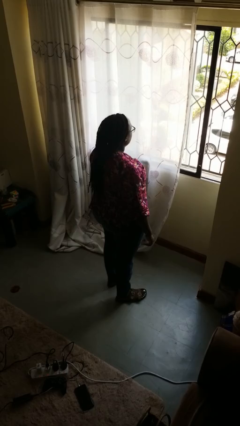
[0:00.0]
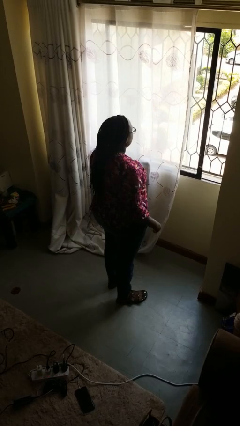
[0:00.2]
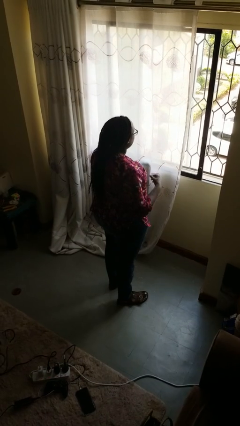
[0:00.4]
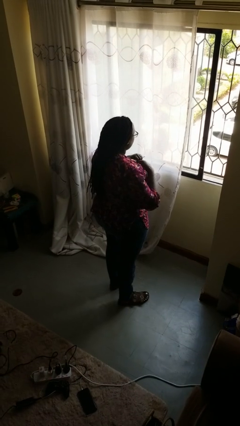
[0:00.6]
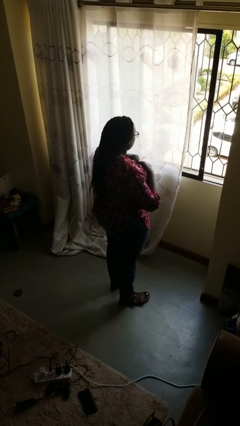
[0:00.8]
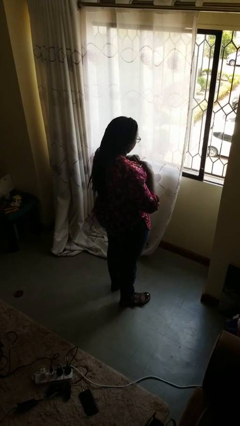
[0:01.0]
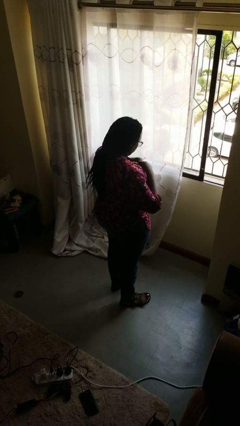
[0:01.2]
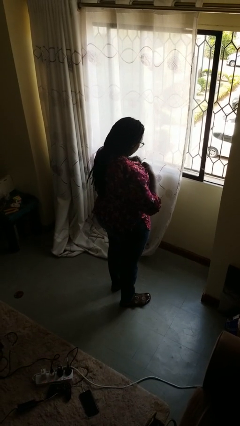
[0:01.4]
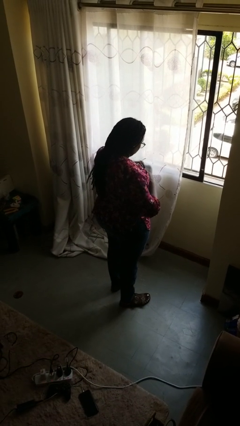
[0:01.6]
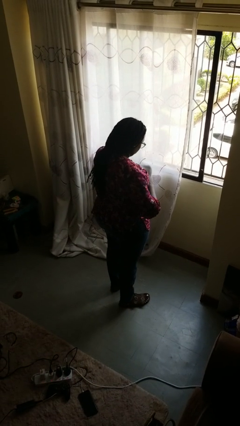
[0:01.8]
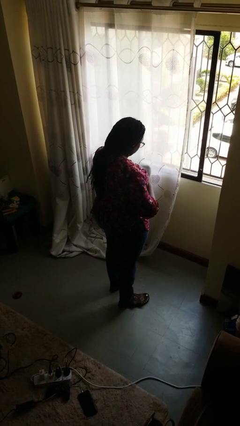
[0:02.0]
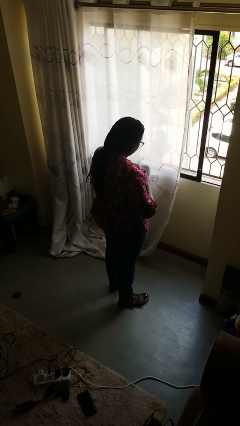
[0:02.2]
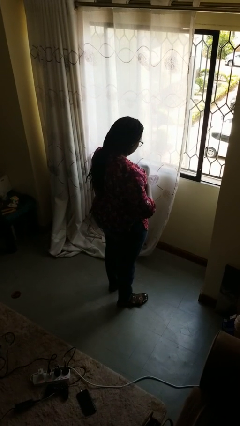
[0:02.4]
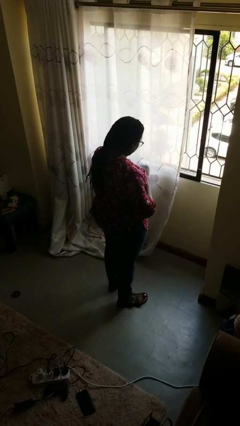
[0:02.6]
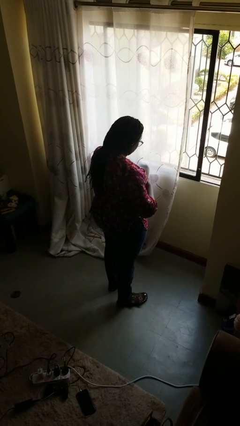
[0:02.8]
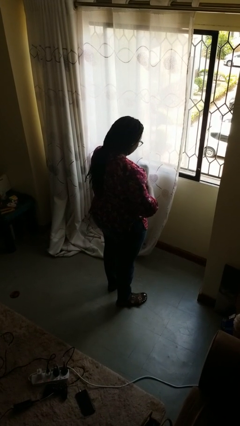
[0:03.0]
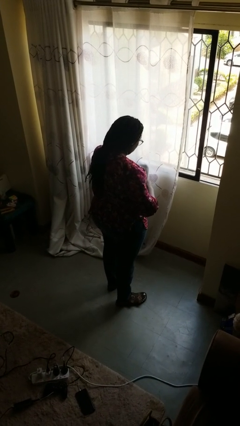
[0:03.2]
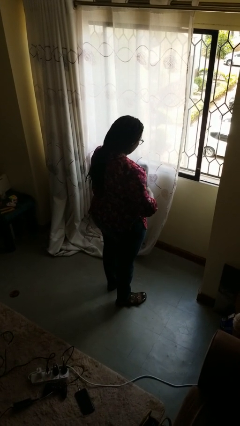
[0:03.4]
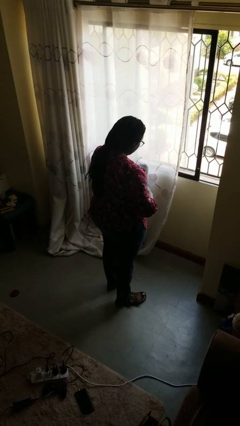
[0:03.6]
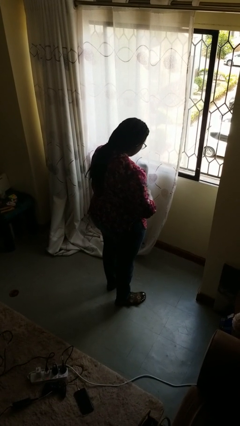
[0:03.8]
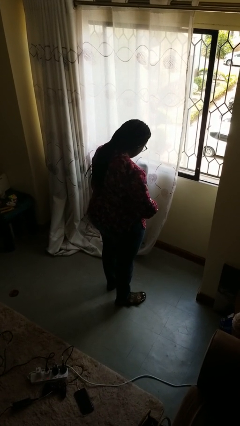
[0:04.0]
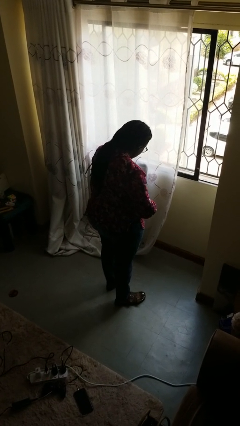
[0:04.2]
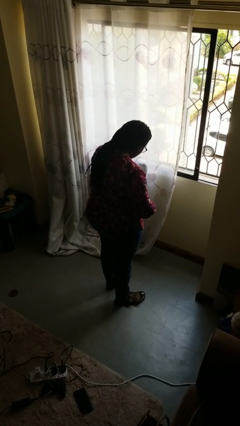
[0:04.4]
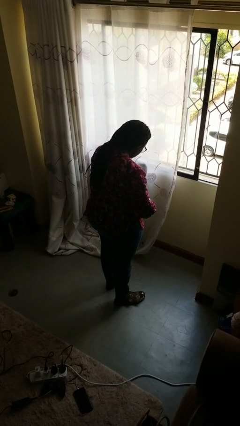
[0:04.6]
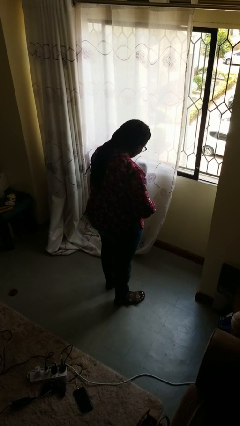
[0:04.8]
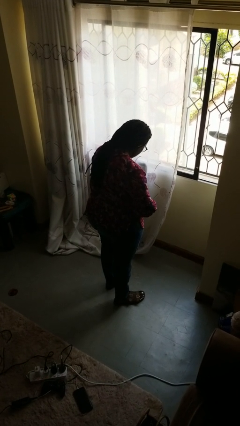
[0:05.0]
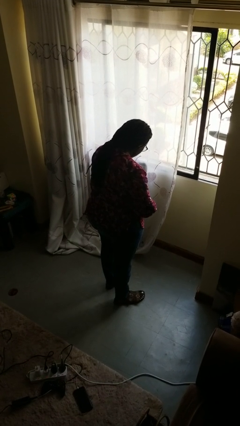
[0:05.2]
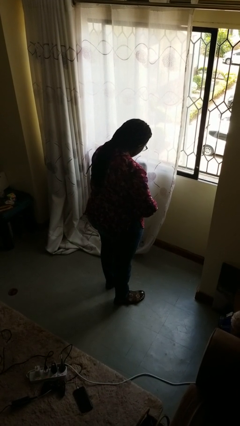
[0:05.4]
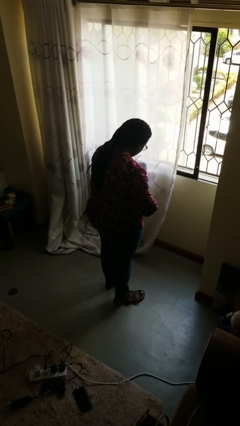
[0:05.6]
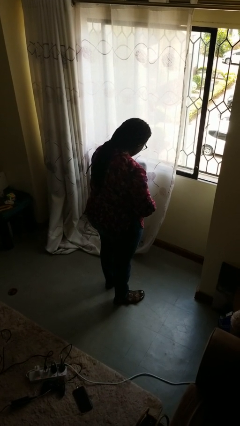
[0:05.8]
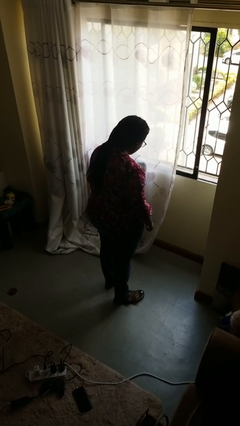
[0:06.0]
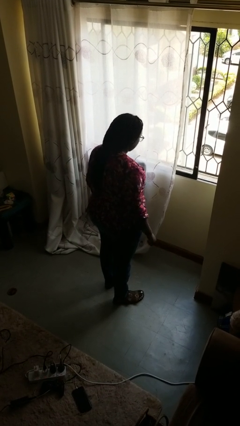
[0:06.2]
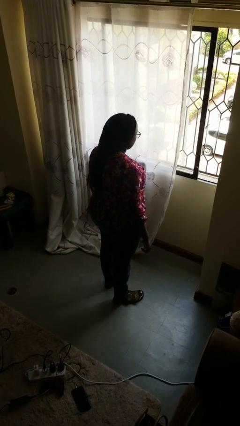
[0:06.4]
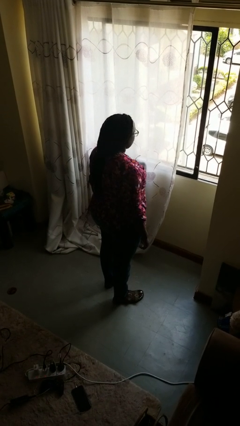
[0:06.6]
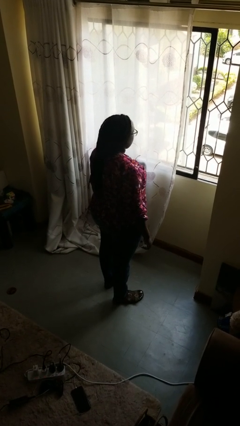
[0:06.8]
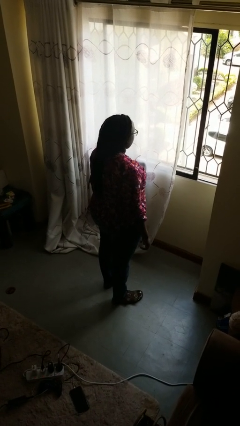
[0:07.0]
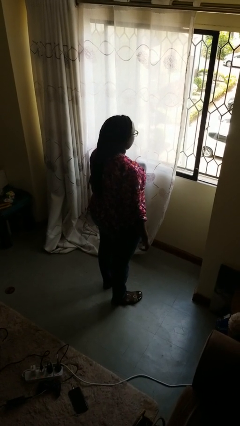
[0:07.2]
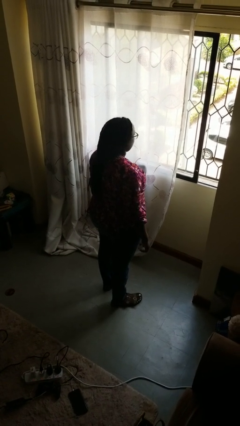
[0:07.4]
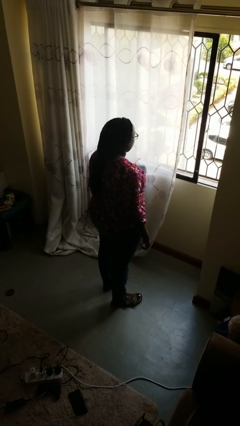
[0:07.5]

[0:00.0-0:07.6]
person unbuttons shirt

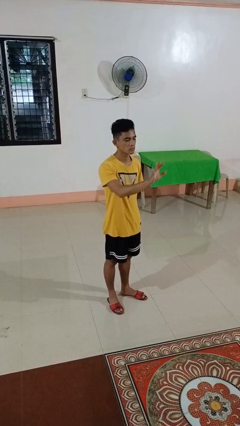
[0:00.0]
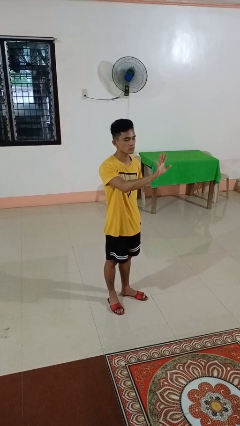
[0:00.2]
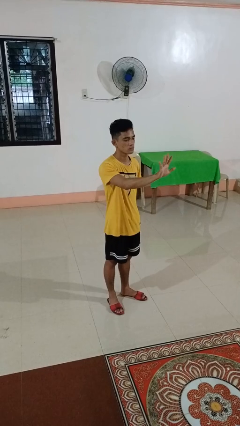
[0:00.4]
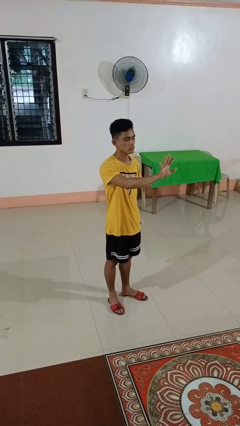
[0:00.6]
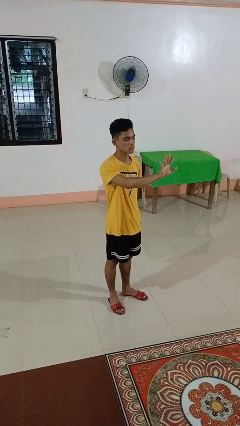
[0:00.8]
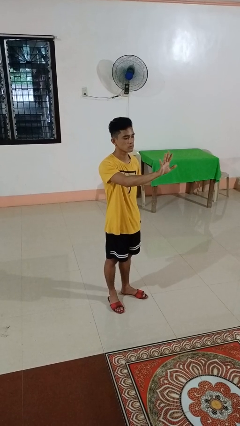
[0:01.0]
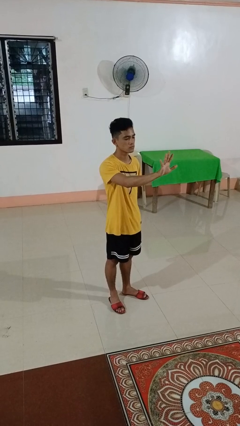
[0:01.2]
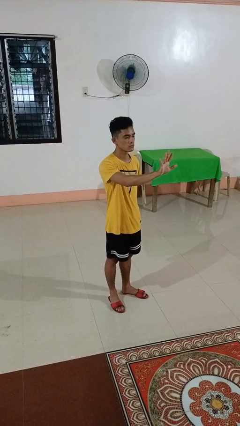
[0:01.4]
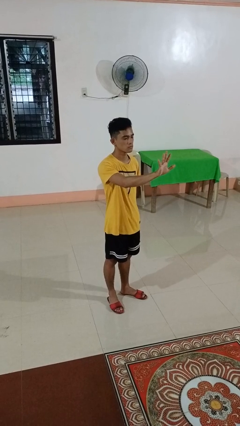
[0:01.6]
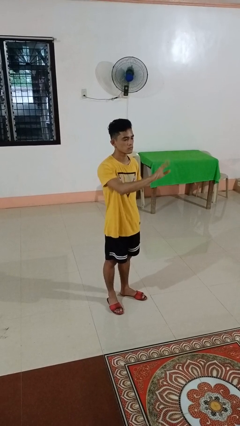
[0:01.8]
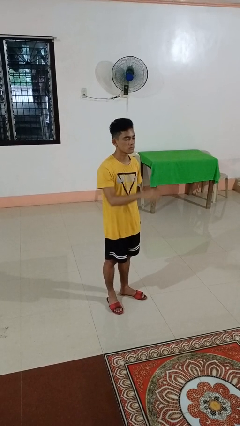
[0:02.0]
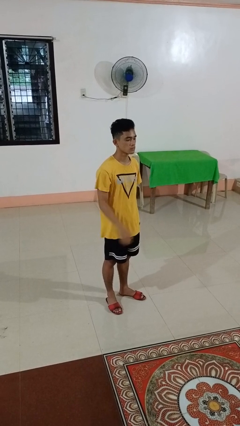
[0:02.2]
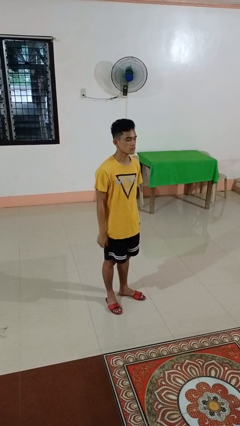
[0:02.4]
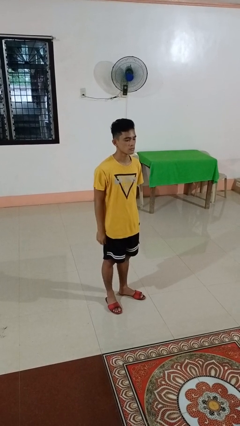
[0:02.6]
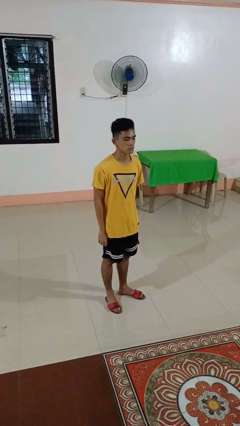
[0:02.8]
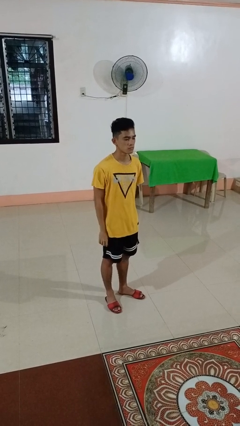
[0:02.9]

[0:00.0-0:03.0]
person gestures number five

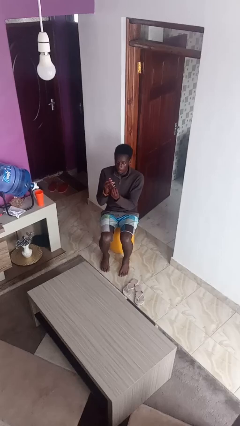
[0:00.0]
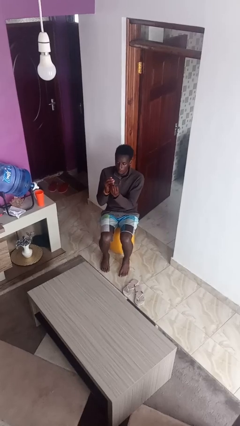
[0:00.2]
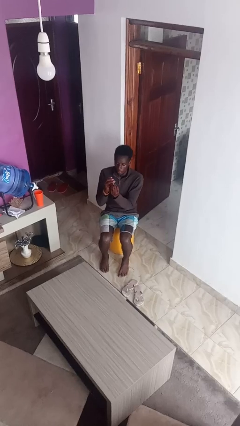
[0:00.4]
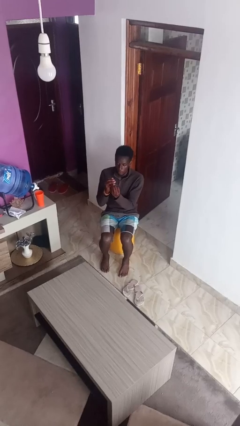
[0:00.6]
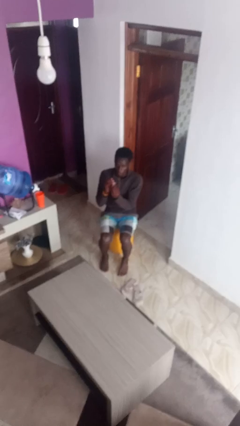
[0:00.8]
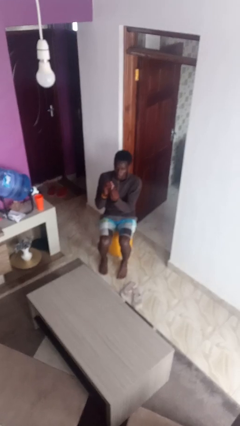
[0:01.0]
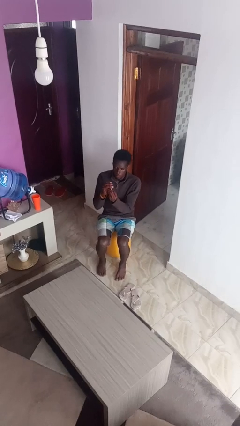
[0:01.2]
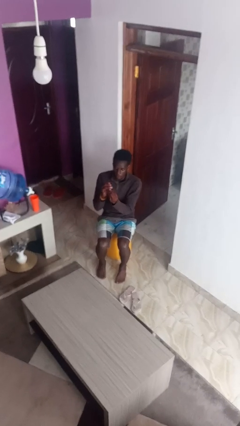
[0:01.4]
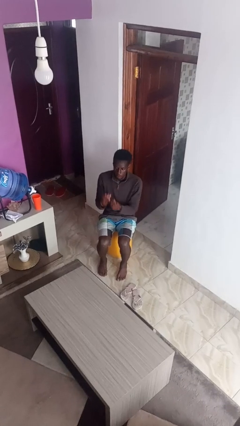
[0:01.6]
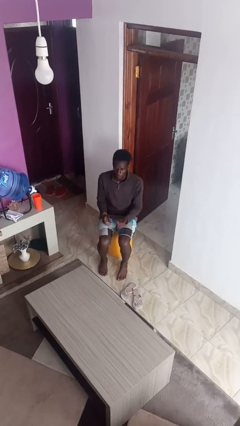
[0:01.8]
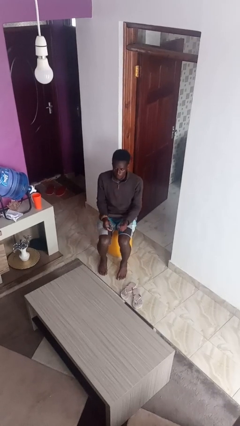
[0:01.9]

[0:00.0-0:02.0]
person clips fingernails

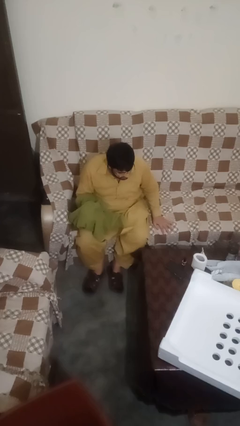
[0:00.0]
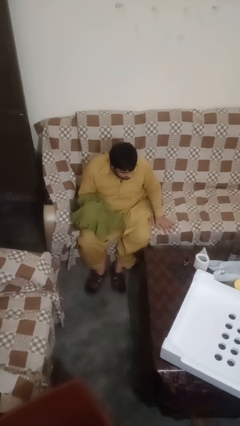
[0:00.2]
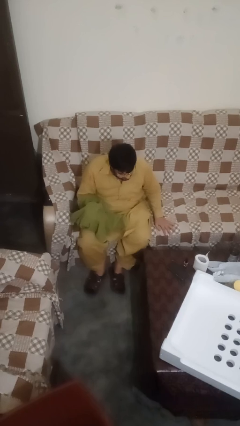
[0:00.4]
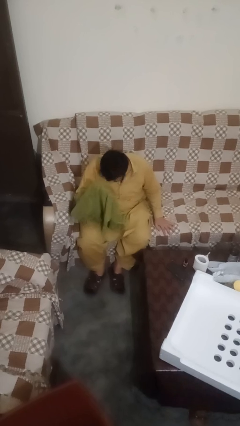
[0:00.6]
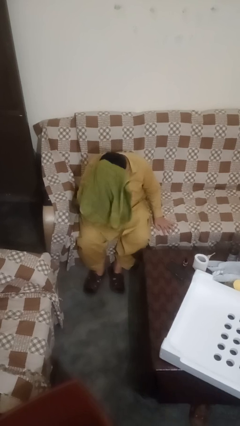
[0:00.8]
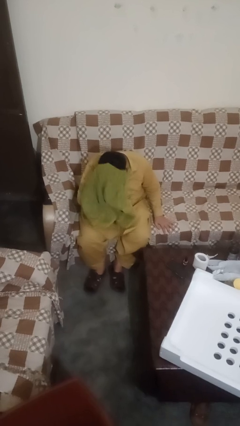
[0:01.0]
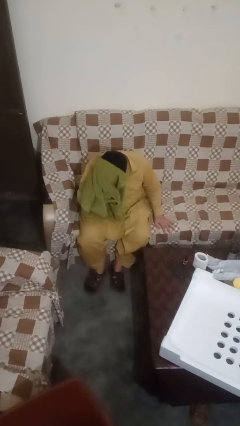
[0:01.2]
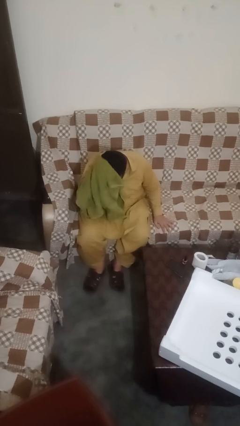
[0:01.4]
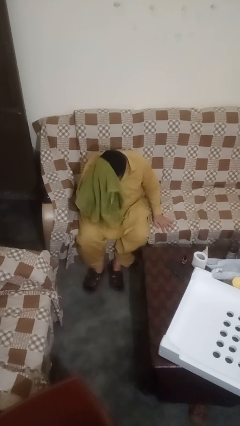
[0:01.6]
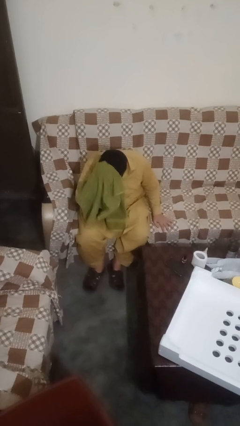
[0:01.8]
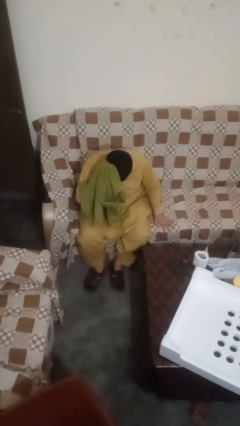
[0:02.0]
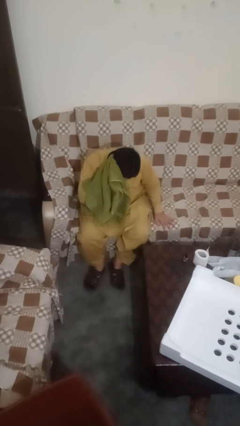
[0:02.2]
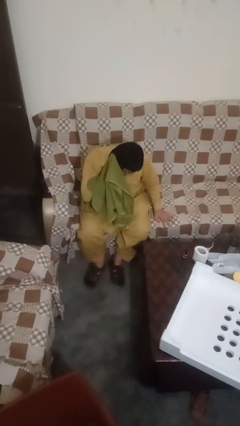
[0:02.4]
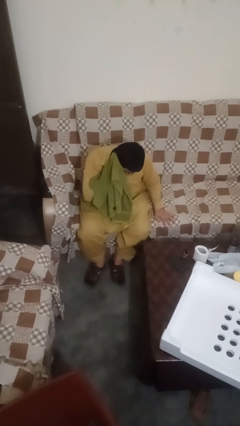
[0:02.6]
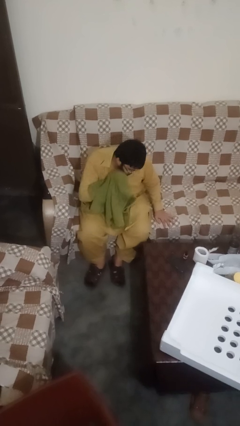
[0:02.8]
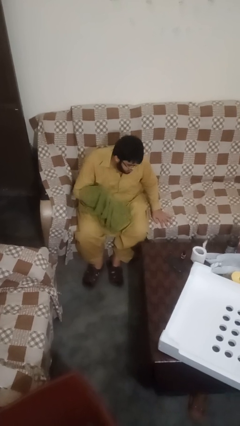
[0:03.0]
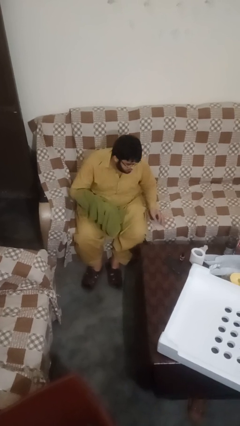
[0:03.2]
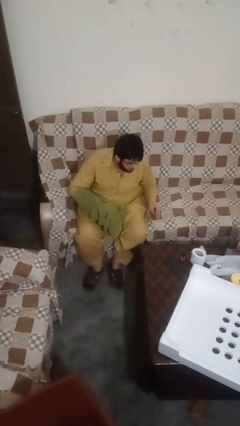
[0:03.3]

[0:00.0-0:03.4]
person dries hair with towel

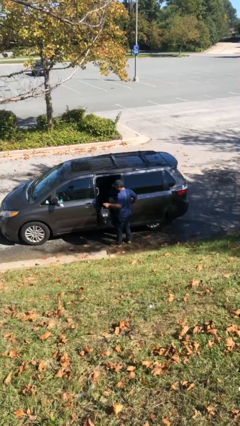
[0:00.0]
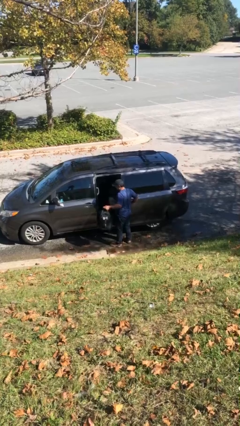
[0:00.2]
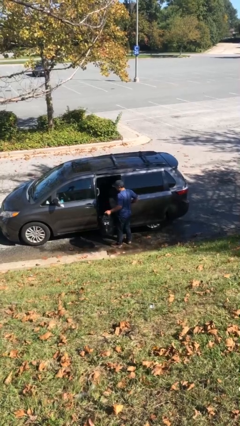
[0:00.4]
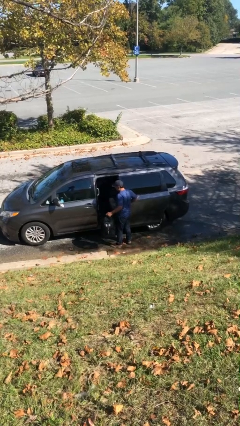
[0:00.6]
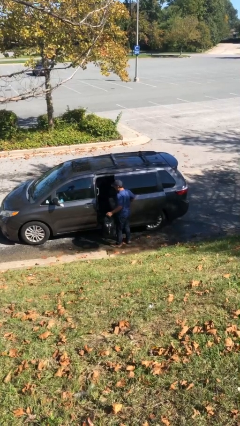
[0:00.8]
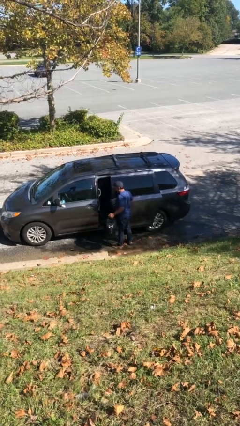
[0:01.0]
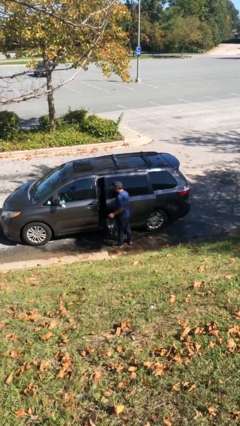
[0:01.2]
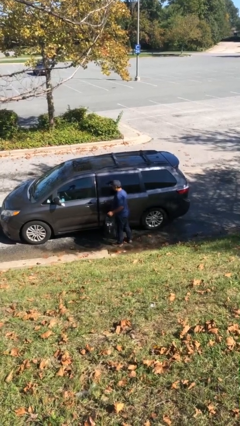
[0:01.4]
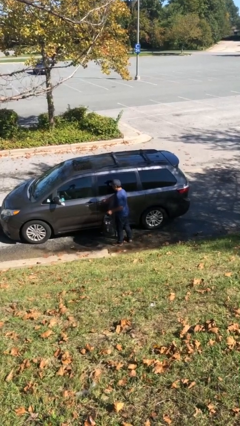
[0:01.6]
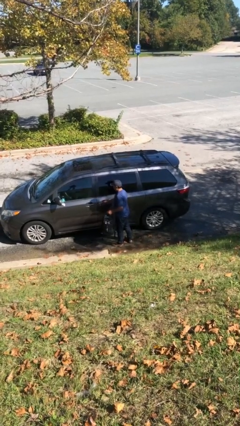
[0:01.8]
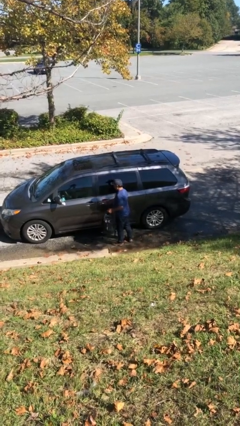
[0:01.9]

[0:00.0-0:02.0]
person closes car door
